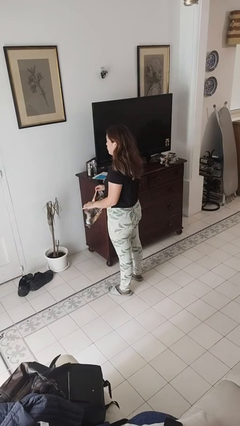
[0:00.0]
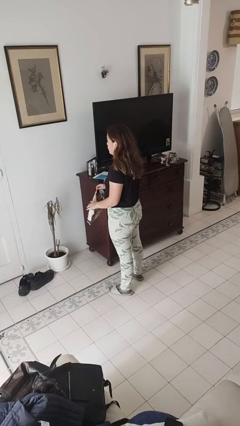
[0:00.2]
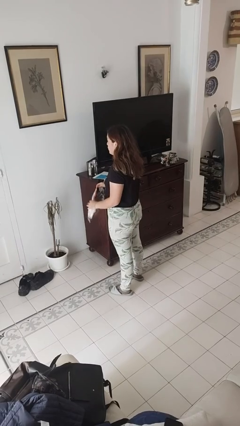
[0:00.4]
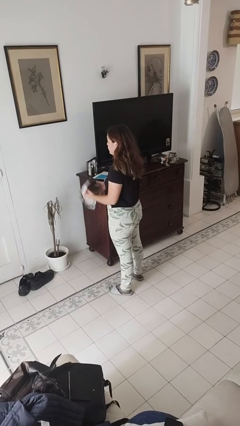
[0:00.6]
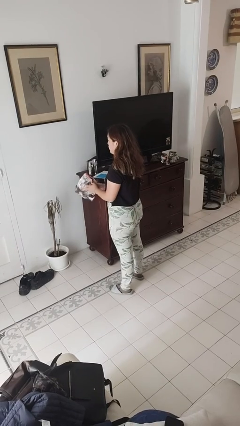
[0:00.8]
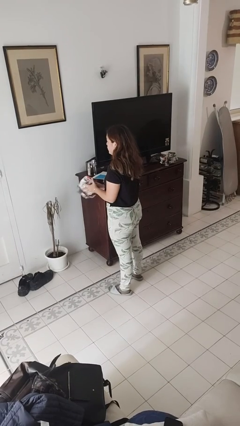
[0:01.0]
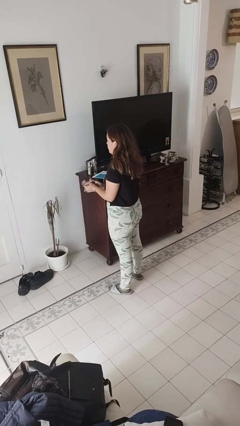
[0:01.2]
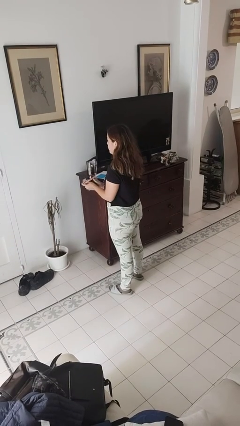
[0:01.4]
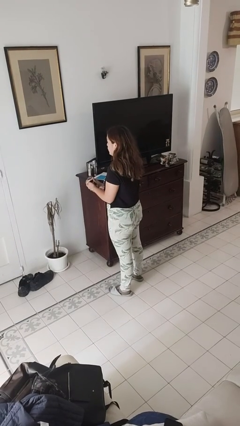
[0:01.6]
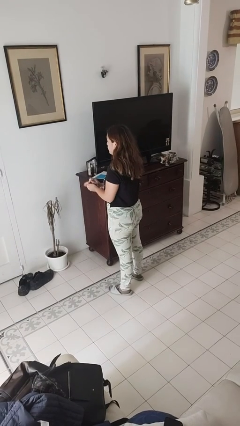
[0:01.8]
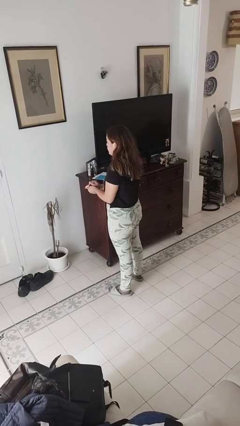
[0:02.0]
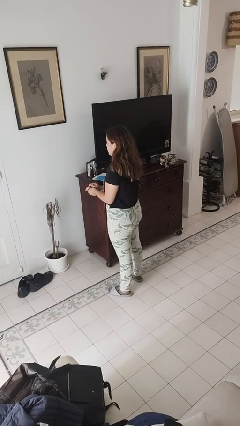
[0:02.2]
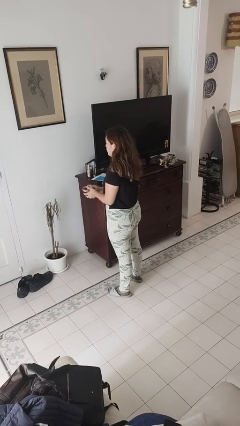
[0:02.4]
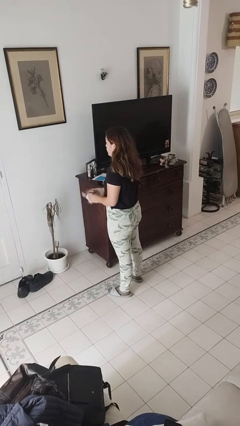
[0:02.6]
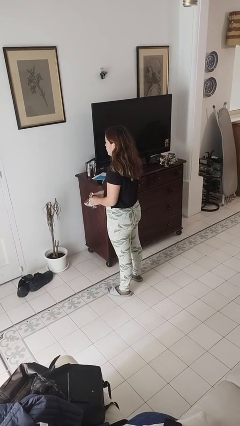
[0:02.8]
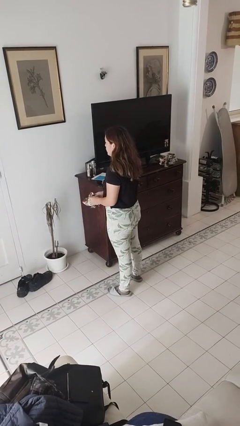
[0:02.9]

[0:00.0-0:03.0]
person crumples paper

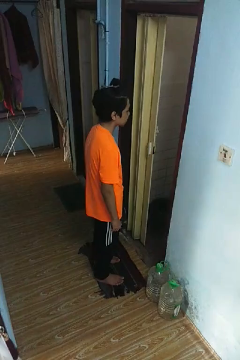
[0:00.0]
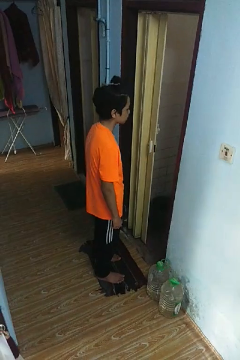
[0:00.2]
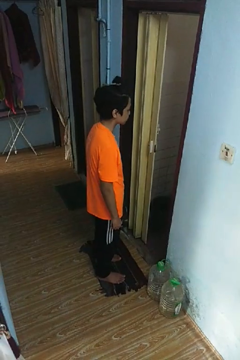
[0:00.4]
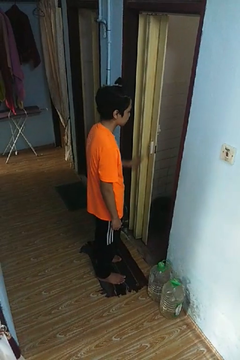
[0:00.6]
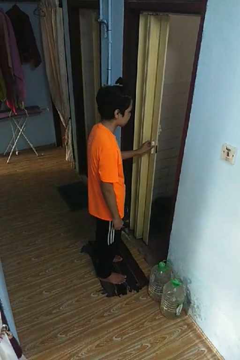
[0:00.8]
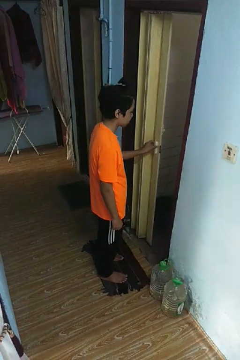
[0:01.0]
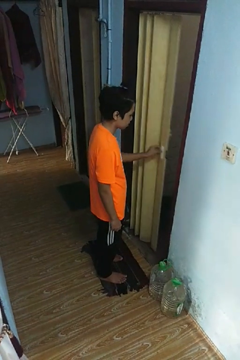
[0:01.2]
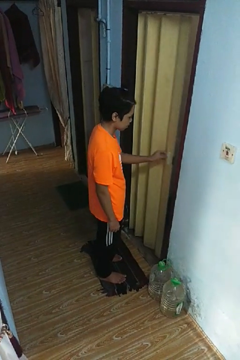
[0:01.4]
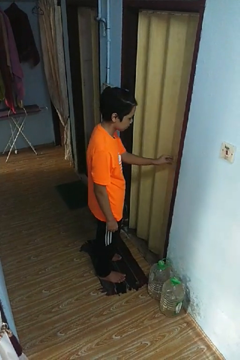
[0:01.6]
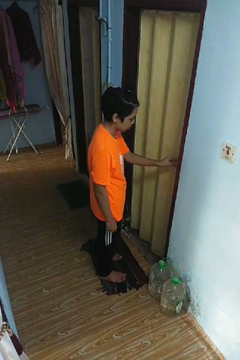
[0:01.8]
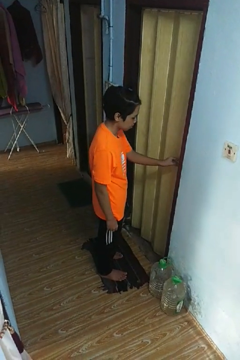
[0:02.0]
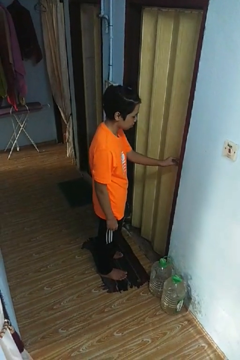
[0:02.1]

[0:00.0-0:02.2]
person closes sliding door

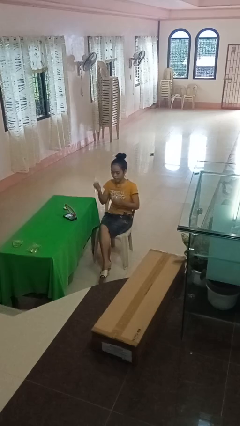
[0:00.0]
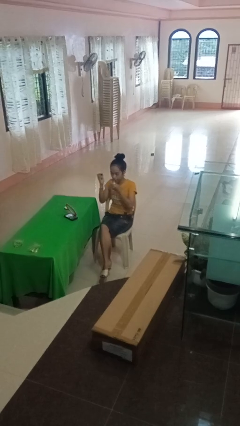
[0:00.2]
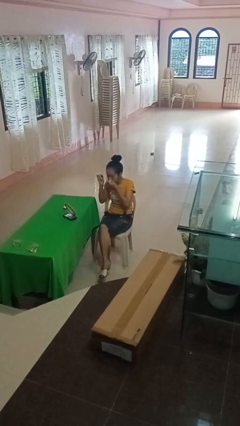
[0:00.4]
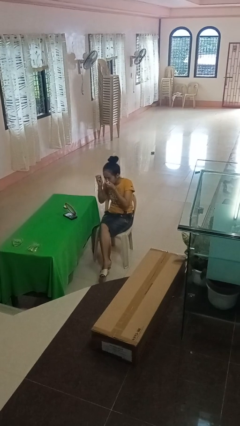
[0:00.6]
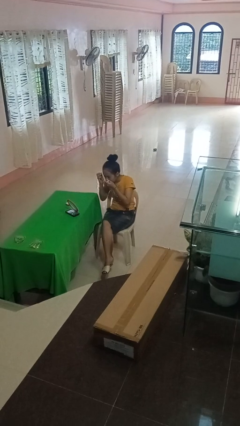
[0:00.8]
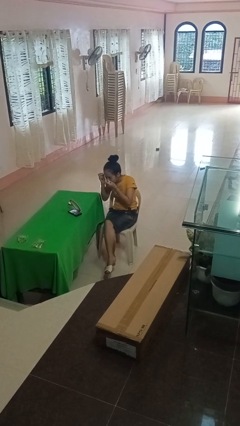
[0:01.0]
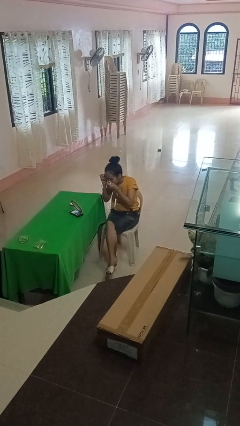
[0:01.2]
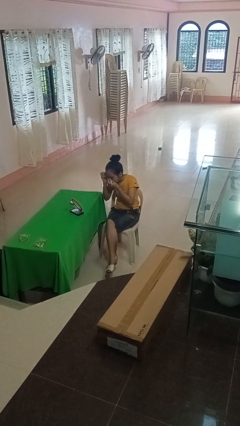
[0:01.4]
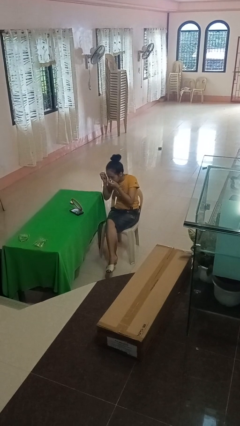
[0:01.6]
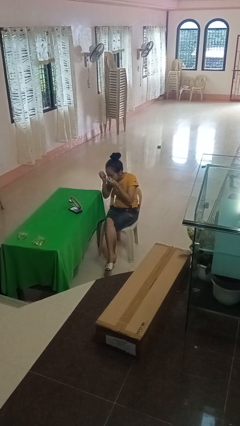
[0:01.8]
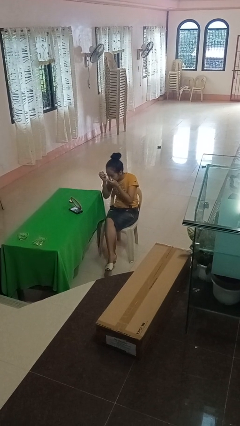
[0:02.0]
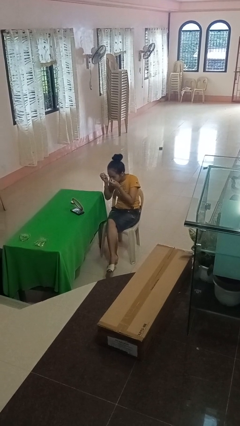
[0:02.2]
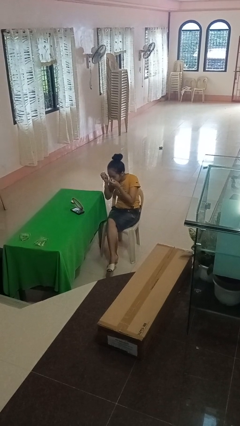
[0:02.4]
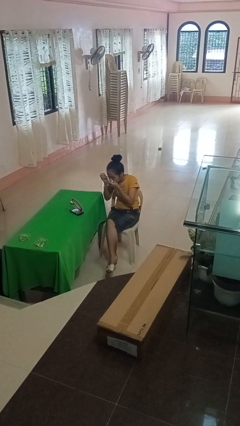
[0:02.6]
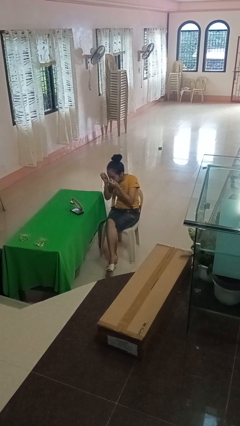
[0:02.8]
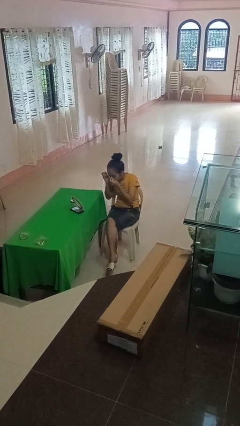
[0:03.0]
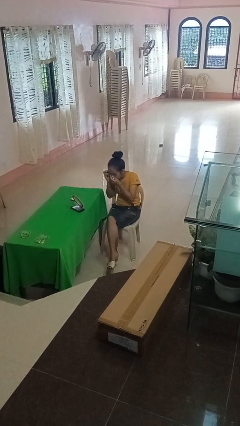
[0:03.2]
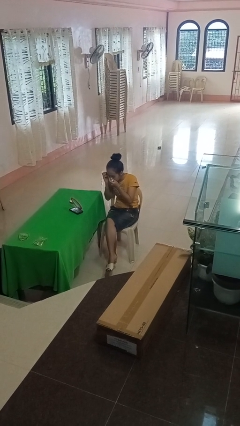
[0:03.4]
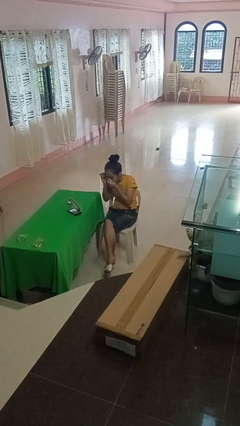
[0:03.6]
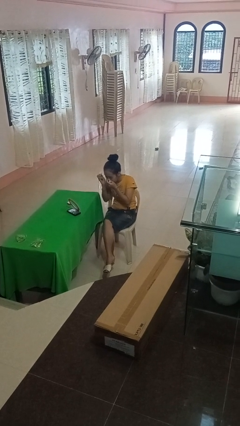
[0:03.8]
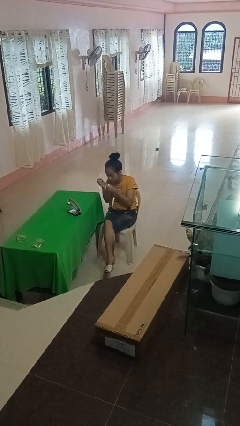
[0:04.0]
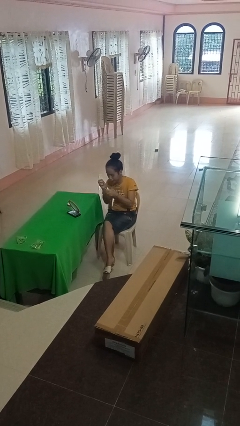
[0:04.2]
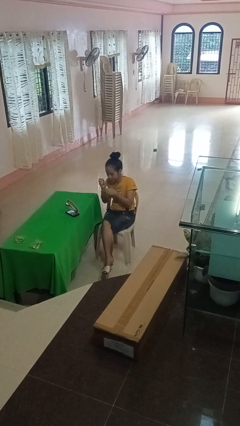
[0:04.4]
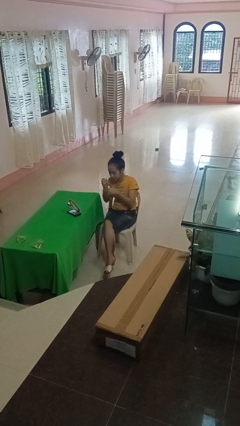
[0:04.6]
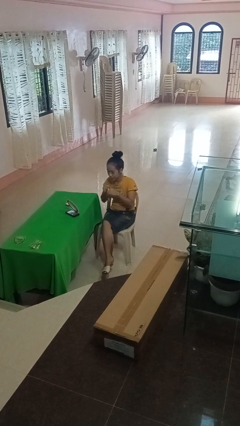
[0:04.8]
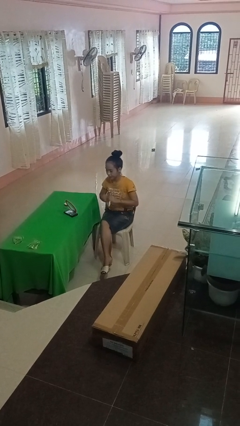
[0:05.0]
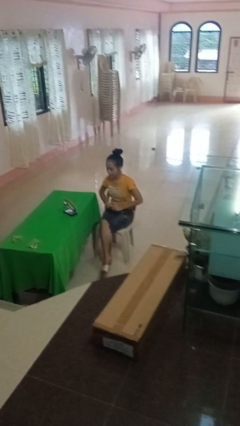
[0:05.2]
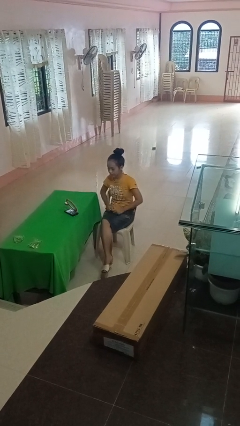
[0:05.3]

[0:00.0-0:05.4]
person applies eye makeup

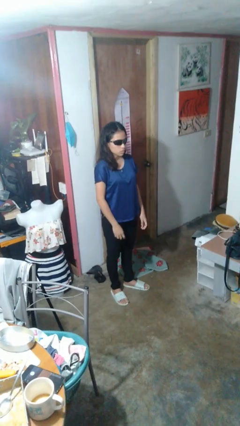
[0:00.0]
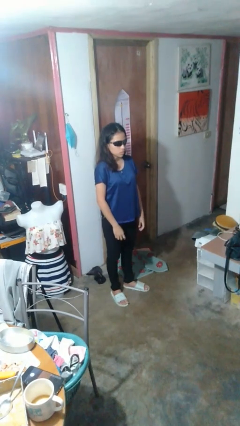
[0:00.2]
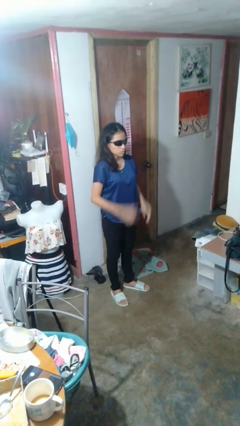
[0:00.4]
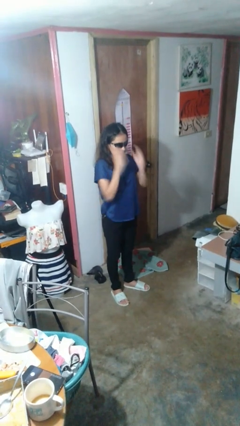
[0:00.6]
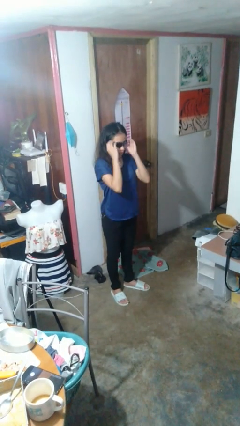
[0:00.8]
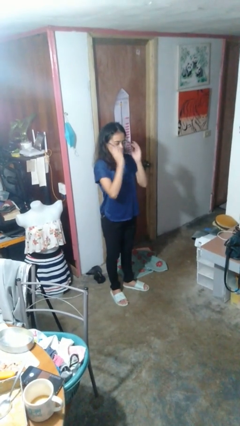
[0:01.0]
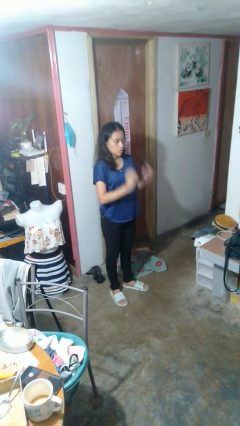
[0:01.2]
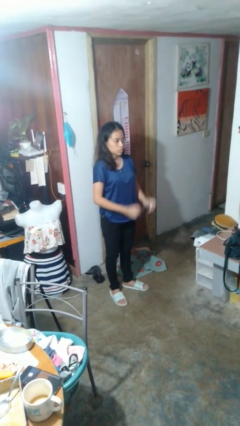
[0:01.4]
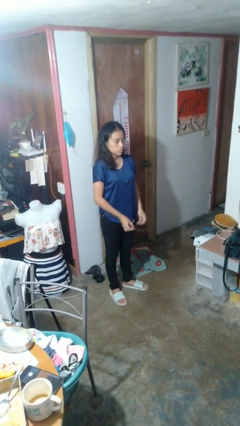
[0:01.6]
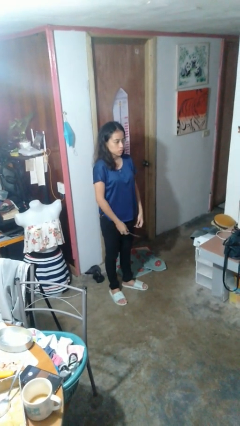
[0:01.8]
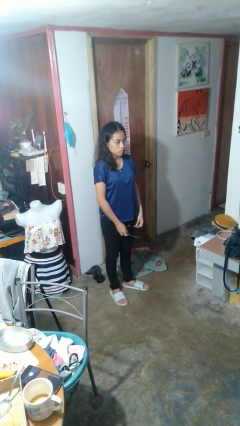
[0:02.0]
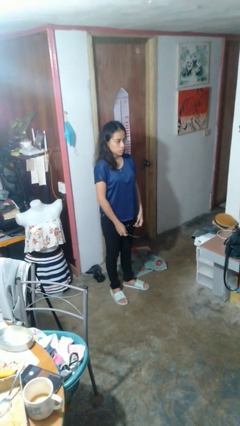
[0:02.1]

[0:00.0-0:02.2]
person takes off sunglasses

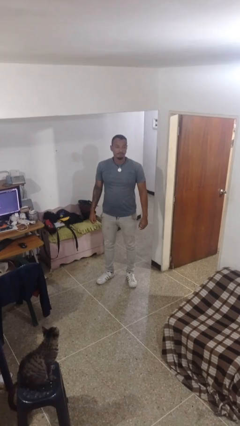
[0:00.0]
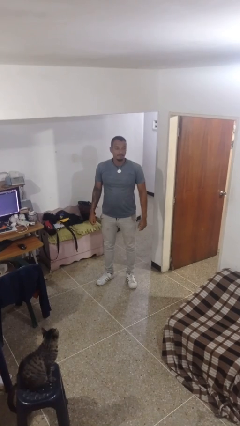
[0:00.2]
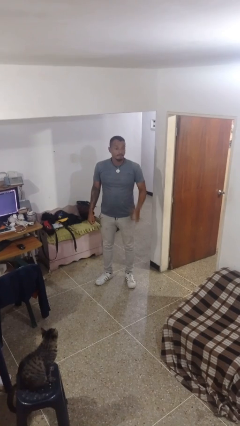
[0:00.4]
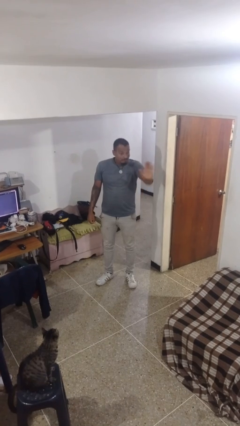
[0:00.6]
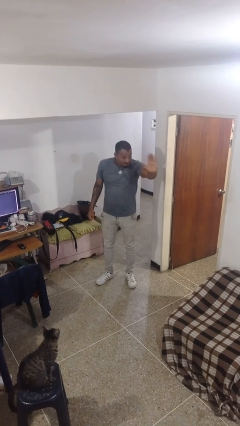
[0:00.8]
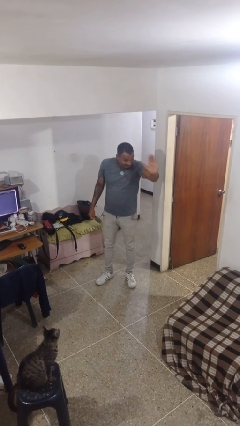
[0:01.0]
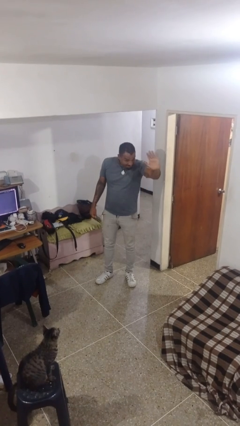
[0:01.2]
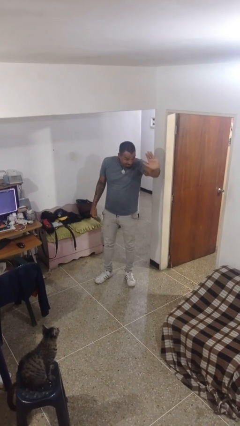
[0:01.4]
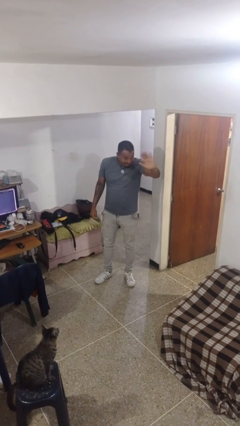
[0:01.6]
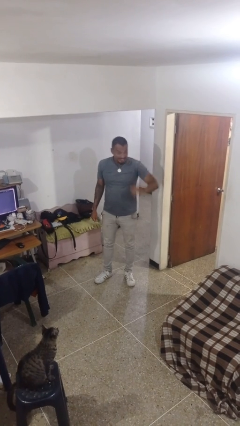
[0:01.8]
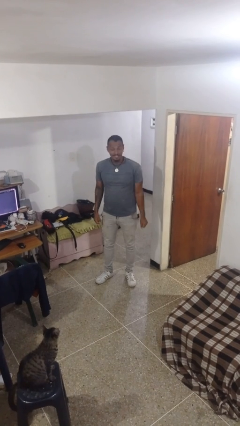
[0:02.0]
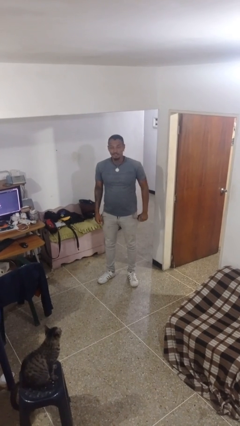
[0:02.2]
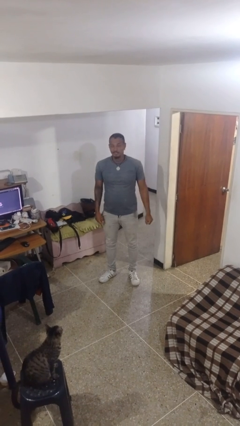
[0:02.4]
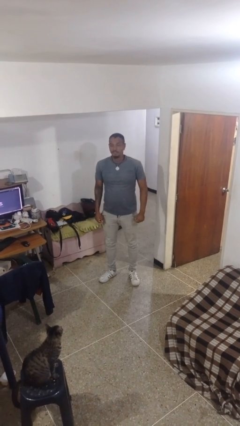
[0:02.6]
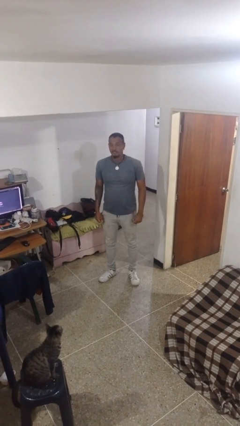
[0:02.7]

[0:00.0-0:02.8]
person gestures stop

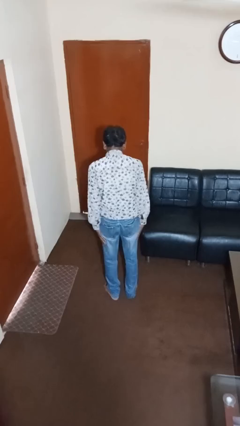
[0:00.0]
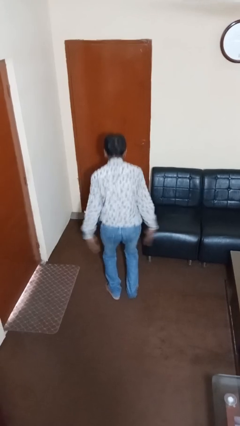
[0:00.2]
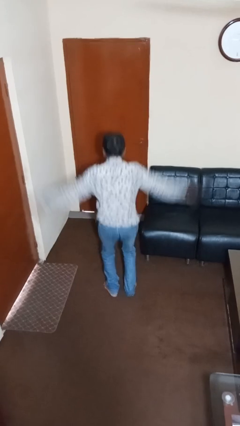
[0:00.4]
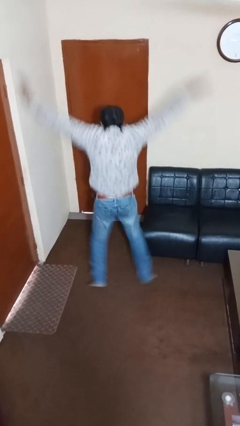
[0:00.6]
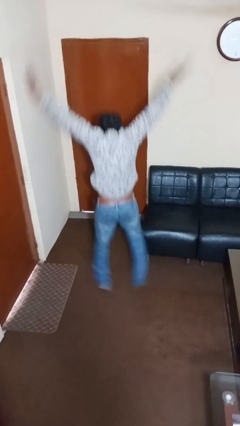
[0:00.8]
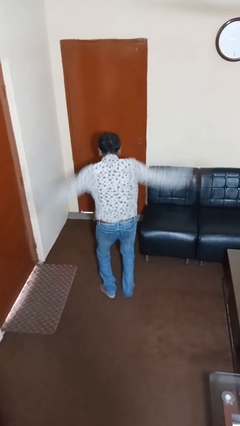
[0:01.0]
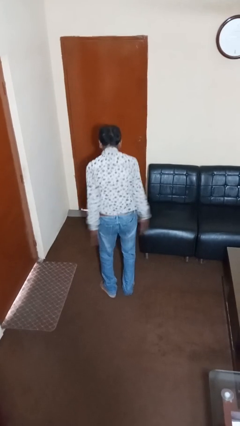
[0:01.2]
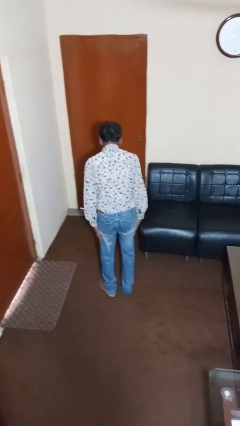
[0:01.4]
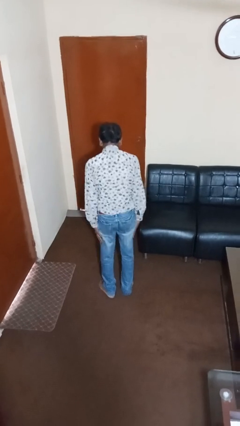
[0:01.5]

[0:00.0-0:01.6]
person exercises with jumping jacks

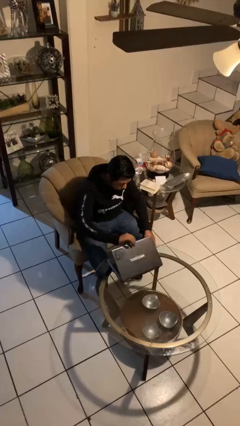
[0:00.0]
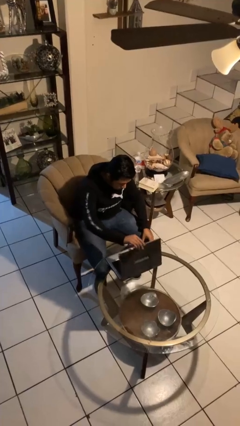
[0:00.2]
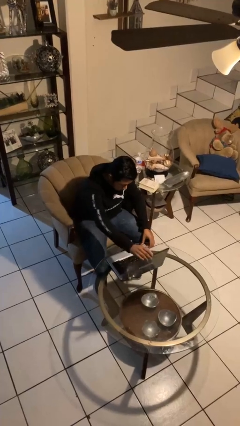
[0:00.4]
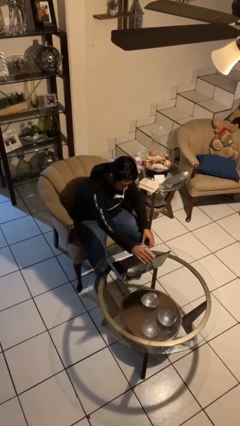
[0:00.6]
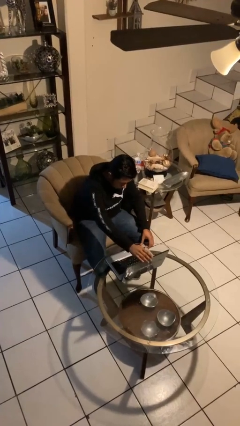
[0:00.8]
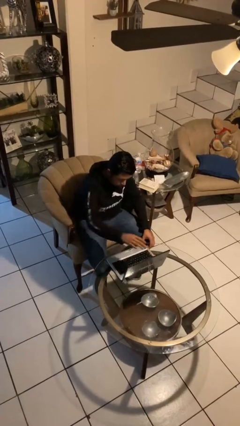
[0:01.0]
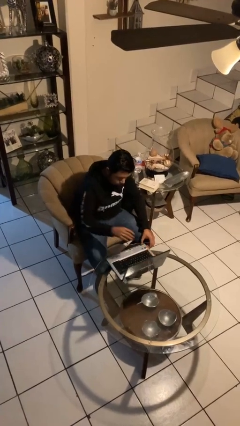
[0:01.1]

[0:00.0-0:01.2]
person opens laptop
